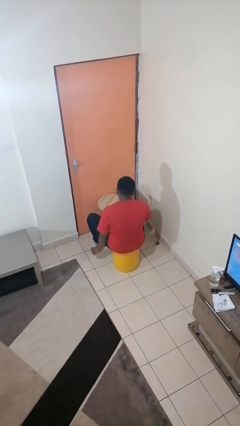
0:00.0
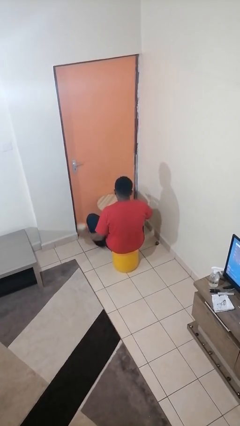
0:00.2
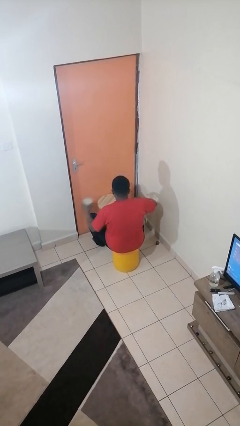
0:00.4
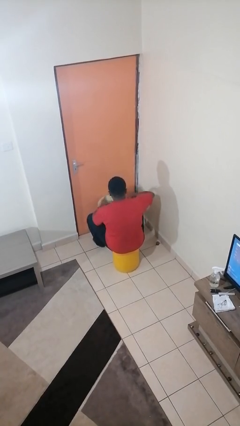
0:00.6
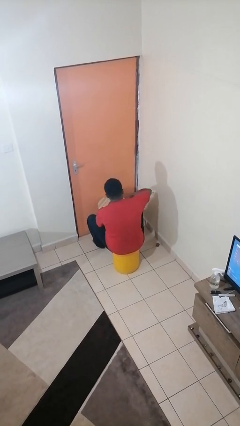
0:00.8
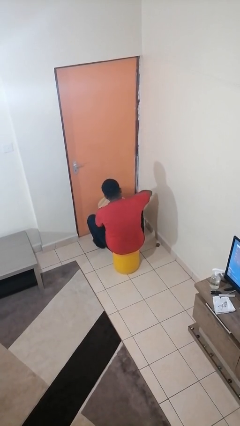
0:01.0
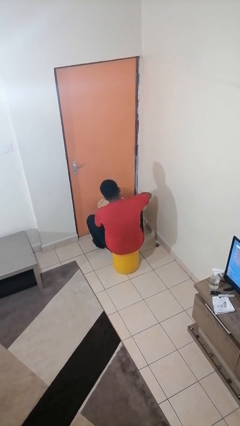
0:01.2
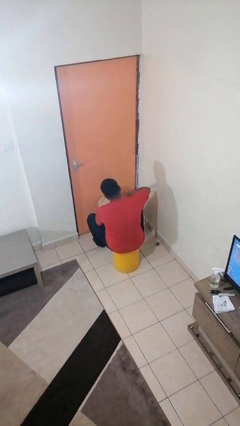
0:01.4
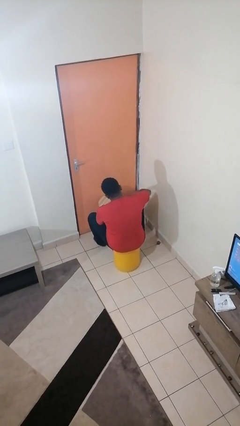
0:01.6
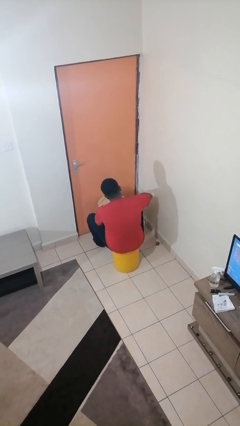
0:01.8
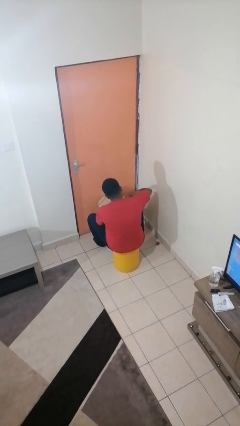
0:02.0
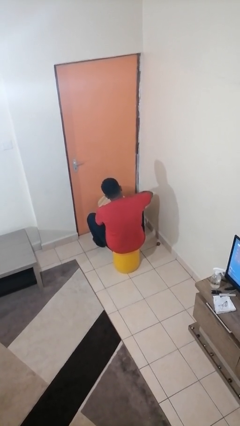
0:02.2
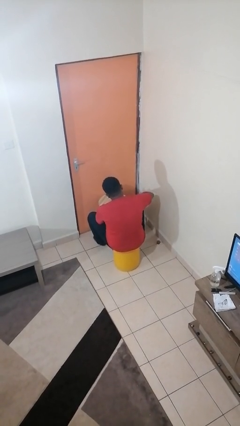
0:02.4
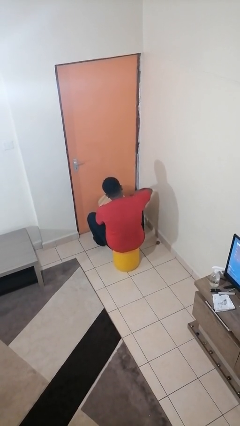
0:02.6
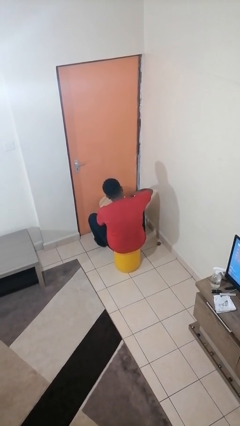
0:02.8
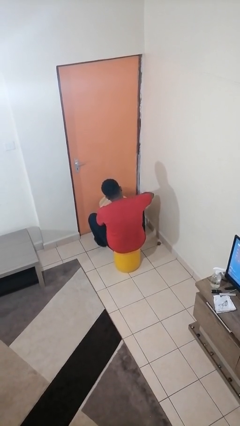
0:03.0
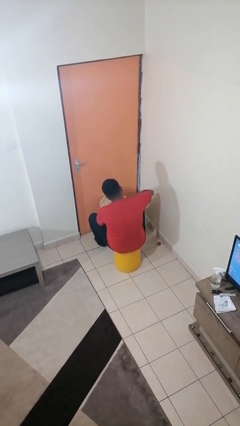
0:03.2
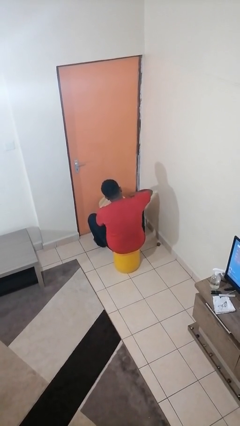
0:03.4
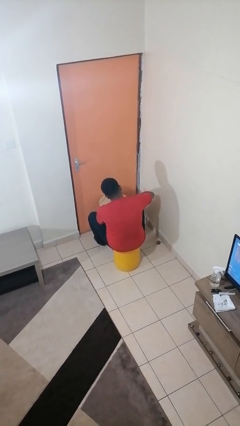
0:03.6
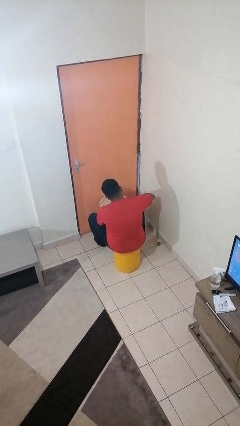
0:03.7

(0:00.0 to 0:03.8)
person opens can with can opener

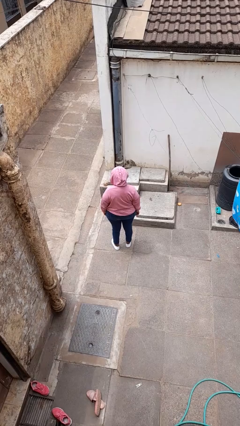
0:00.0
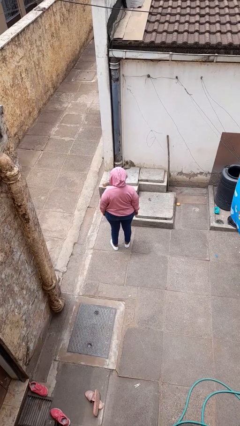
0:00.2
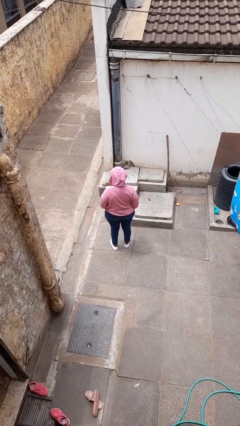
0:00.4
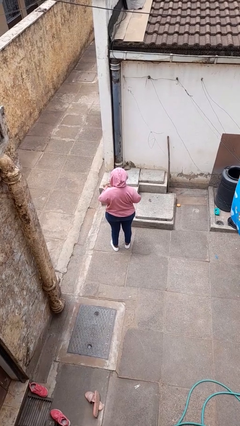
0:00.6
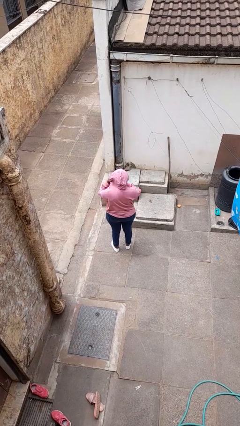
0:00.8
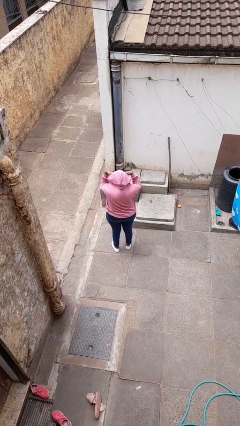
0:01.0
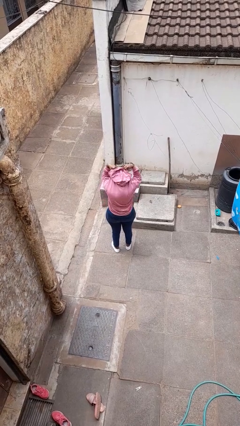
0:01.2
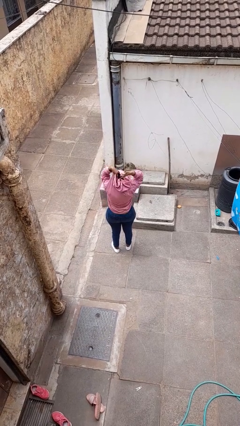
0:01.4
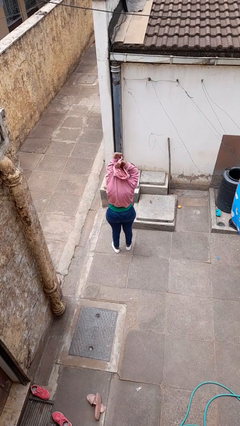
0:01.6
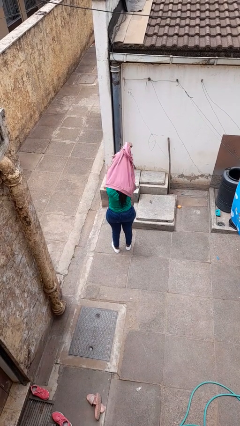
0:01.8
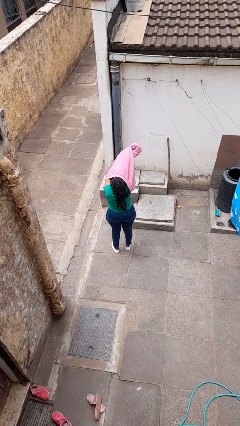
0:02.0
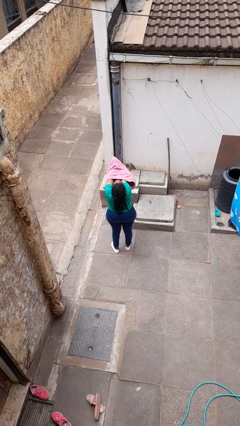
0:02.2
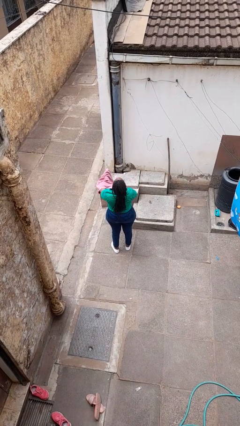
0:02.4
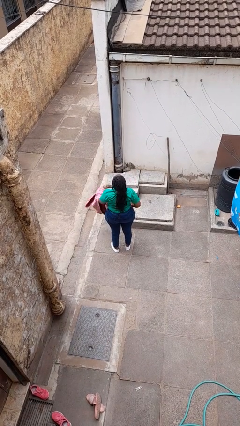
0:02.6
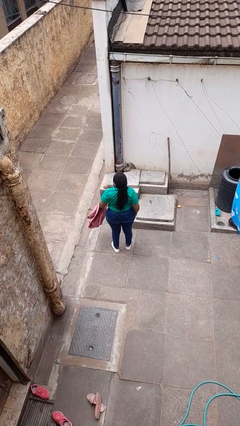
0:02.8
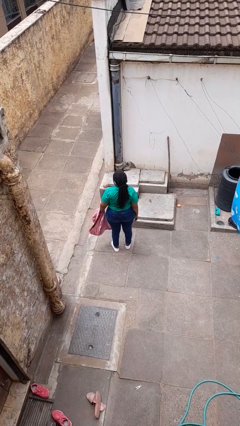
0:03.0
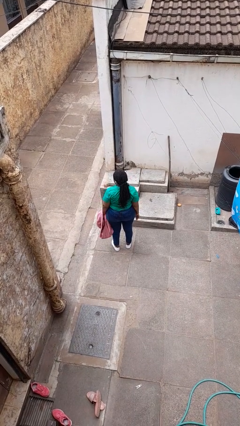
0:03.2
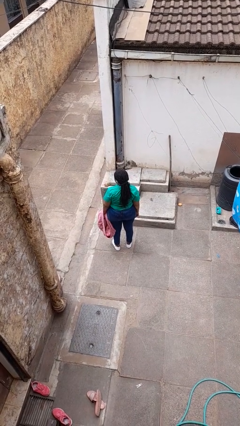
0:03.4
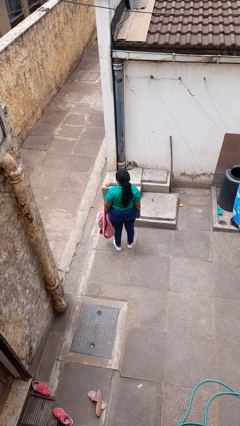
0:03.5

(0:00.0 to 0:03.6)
person takes off hoodie

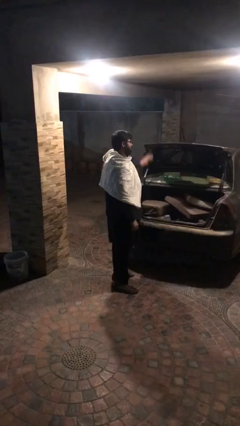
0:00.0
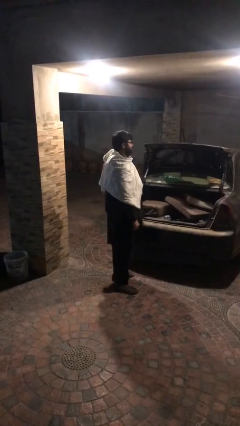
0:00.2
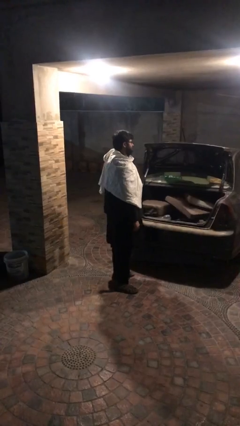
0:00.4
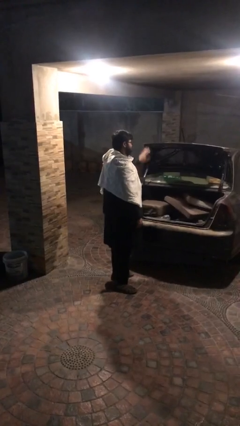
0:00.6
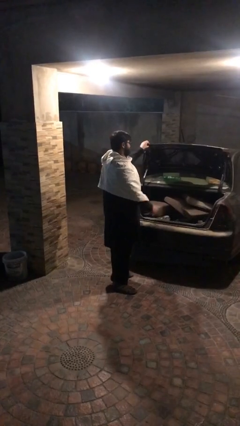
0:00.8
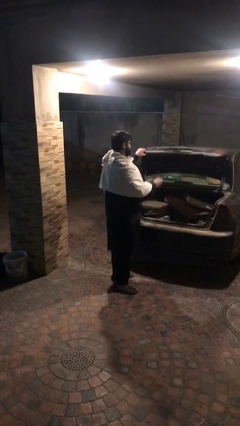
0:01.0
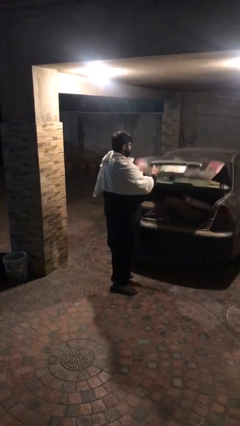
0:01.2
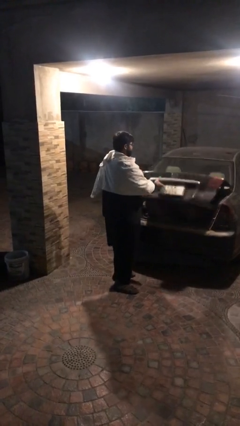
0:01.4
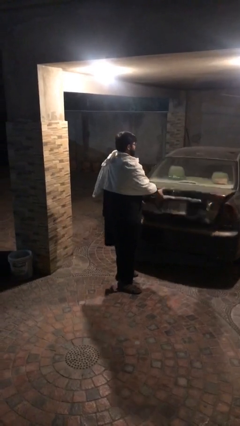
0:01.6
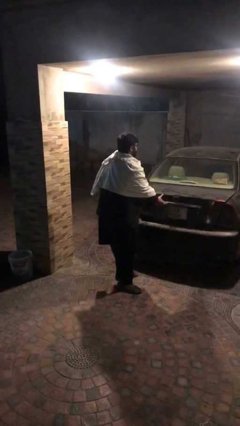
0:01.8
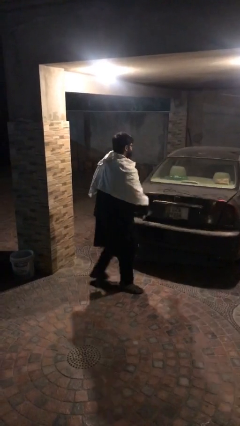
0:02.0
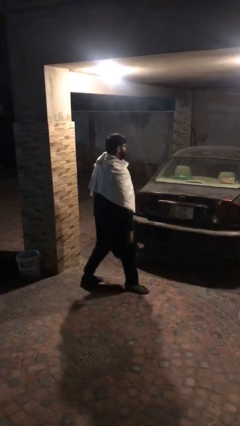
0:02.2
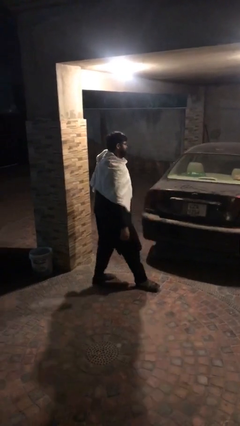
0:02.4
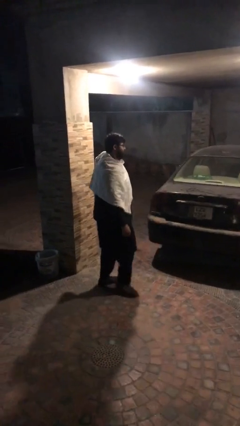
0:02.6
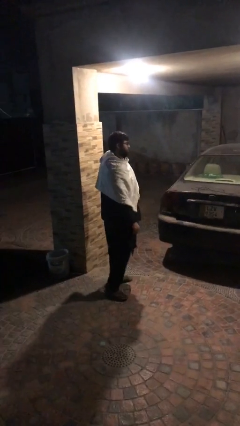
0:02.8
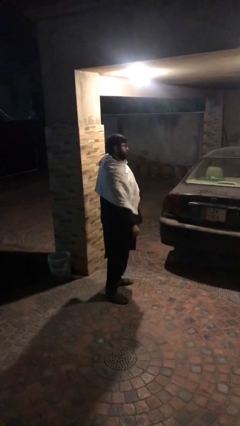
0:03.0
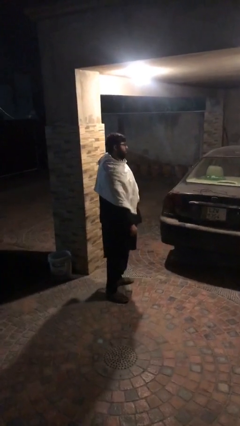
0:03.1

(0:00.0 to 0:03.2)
person closes car trunk

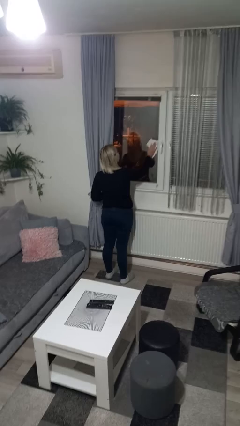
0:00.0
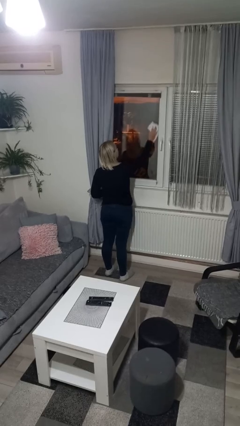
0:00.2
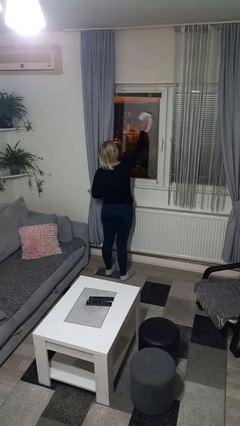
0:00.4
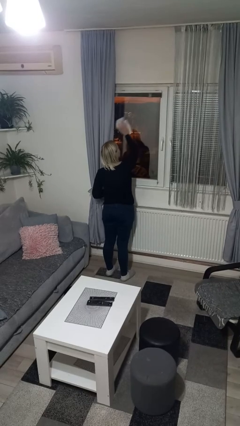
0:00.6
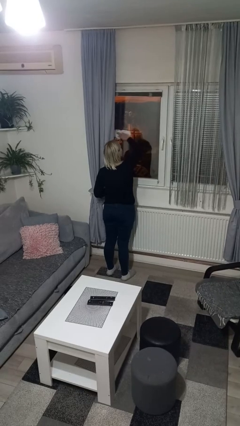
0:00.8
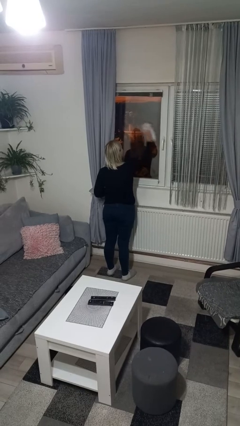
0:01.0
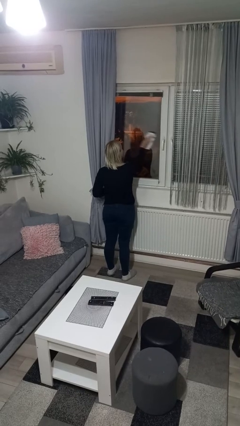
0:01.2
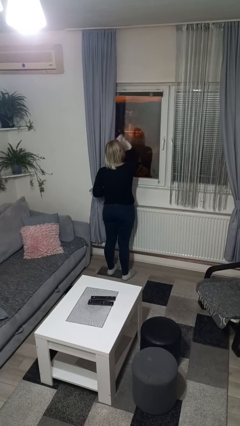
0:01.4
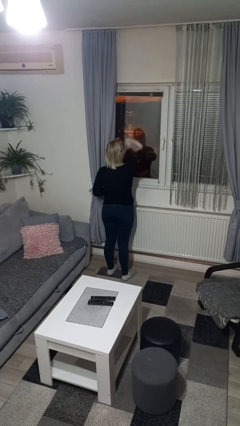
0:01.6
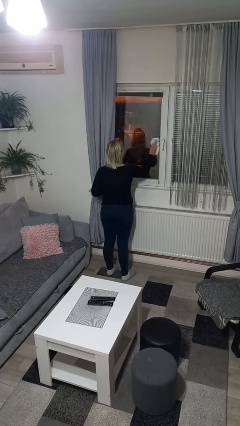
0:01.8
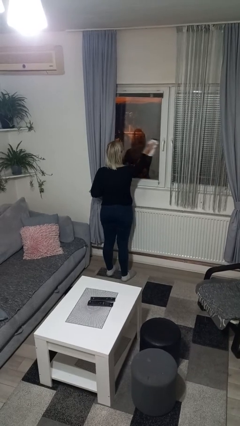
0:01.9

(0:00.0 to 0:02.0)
person washes window

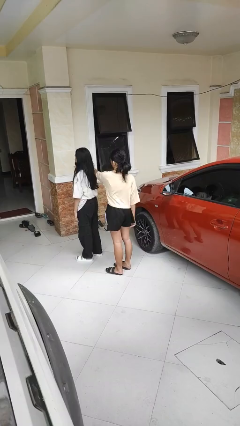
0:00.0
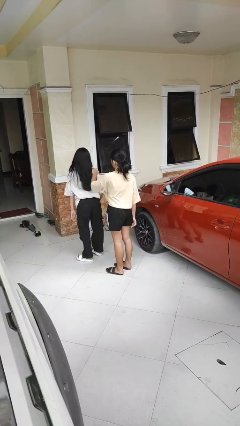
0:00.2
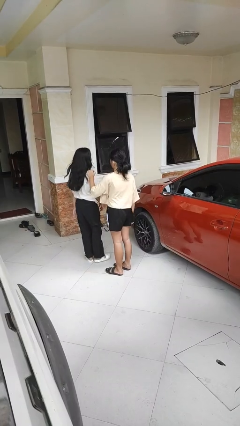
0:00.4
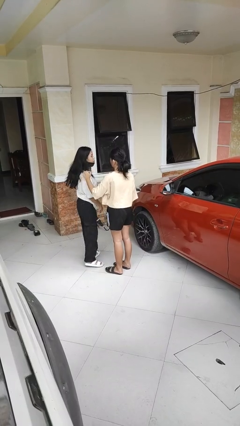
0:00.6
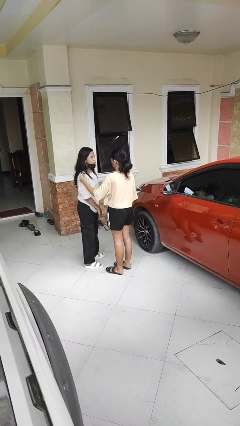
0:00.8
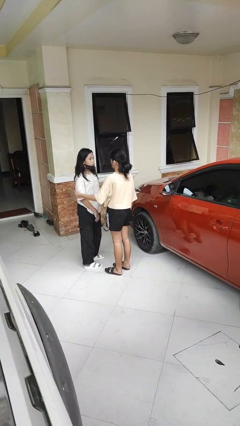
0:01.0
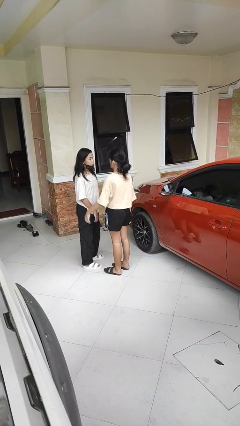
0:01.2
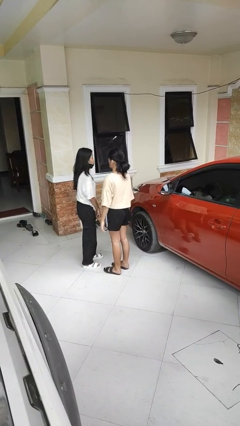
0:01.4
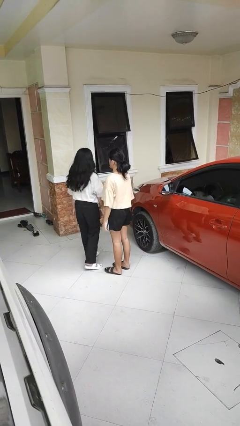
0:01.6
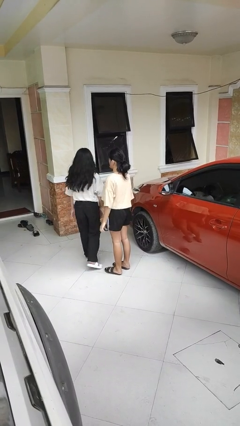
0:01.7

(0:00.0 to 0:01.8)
person spins person around

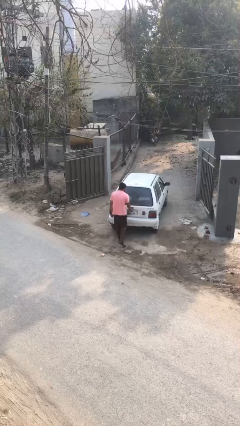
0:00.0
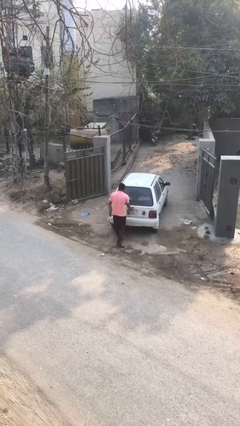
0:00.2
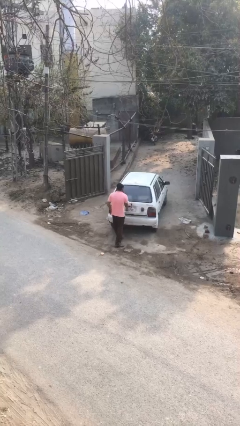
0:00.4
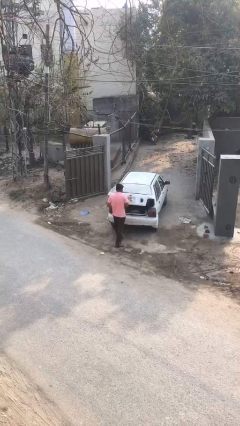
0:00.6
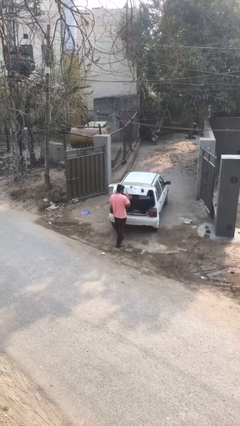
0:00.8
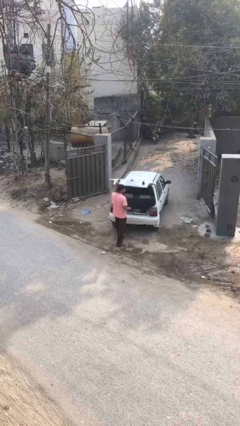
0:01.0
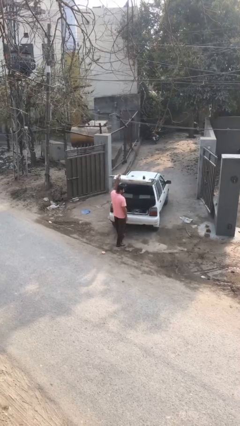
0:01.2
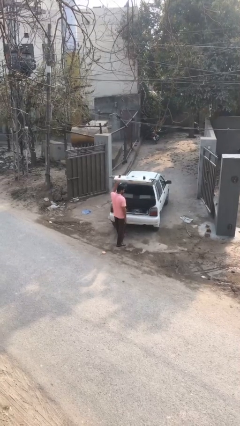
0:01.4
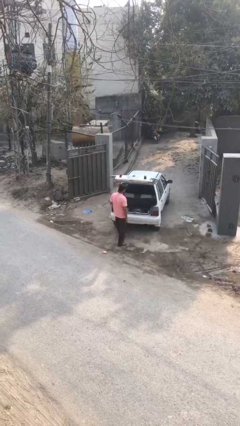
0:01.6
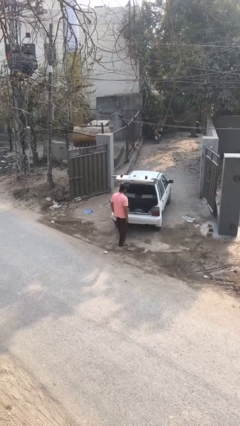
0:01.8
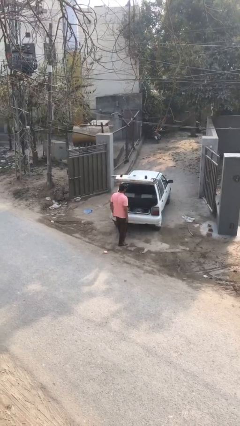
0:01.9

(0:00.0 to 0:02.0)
person opens car trunk

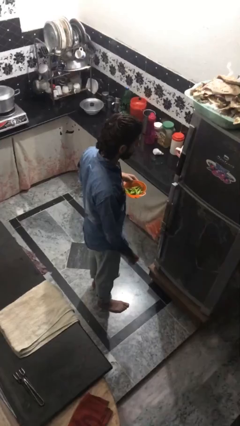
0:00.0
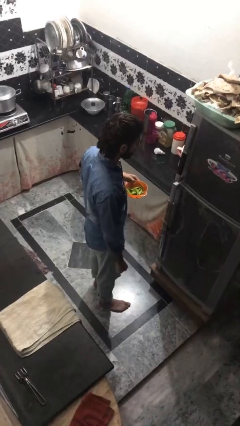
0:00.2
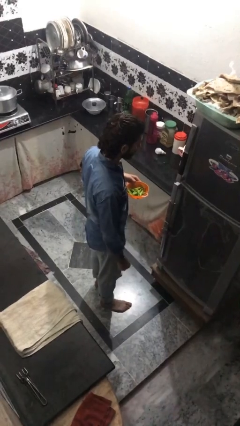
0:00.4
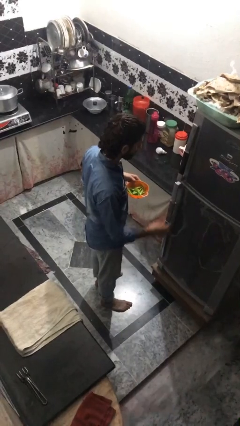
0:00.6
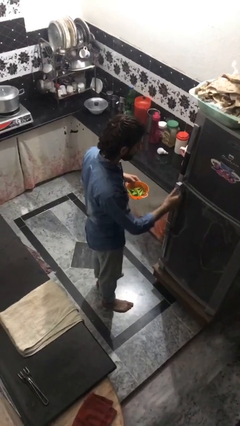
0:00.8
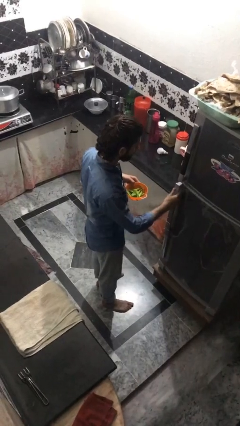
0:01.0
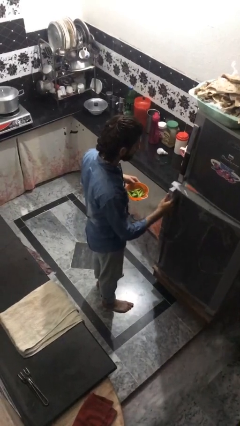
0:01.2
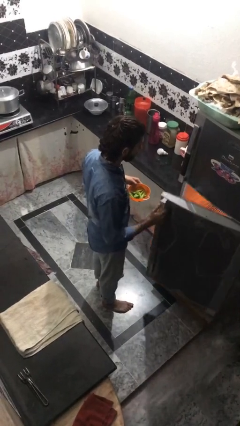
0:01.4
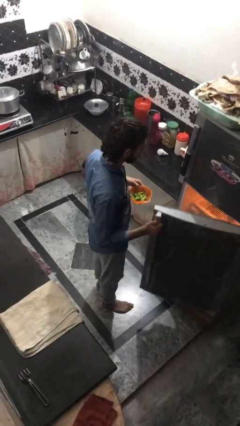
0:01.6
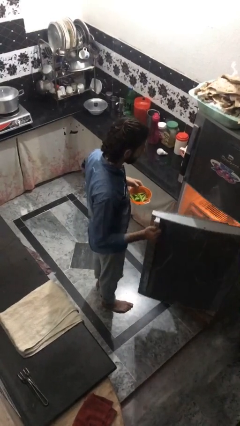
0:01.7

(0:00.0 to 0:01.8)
person opens refrigerator
